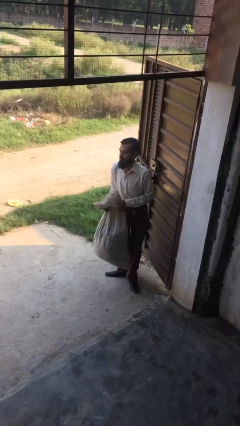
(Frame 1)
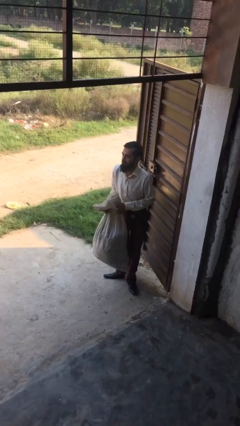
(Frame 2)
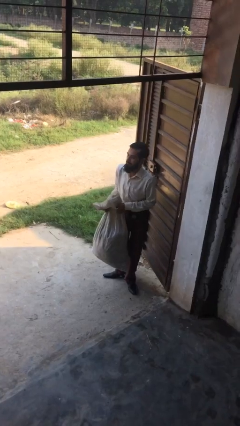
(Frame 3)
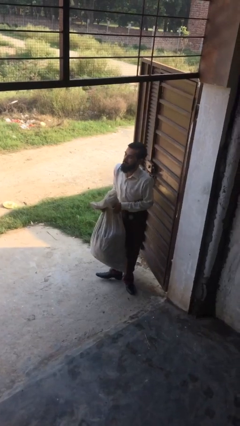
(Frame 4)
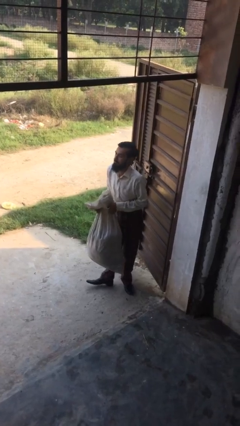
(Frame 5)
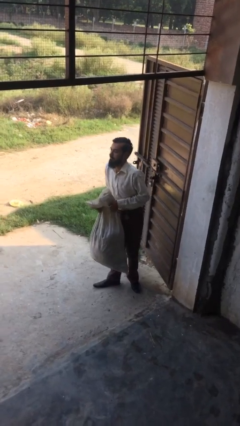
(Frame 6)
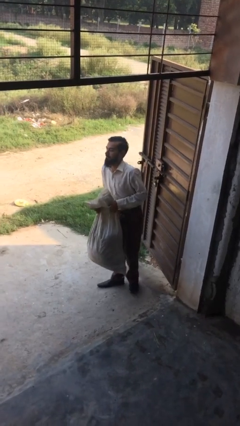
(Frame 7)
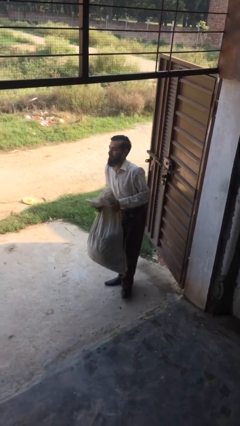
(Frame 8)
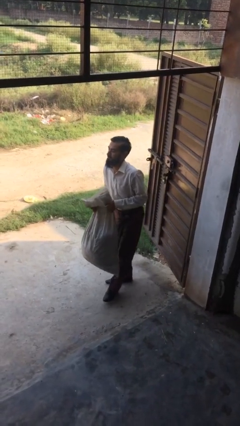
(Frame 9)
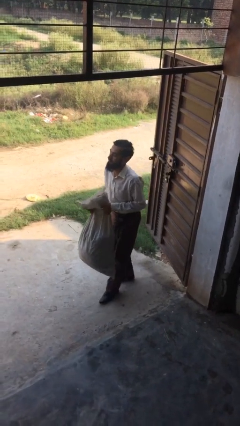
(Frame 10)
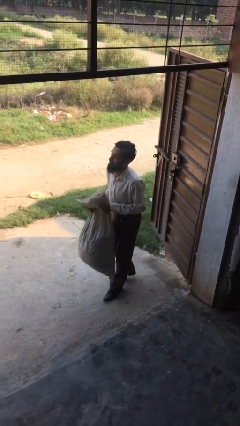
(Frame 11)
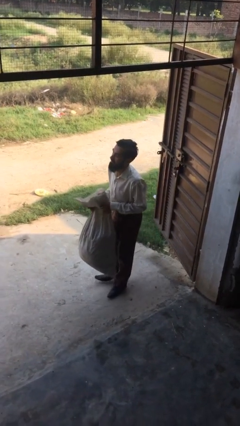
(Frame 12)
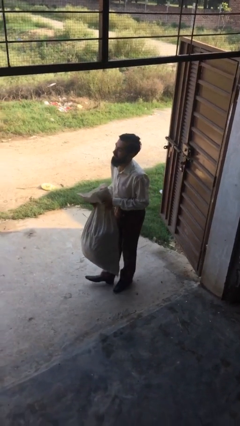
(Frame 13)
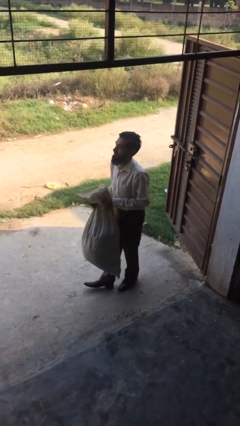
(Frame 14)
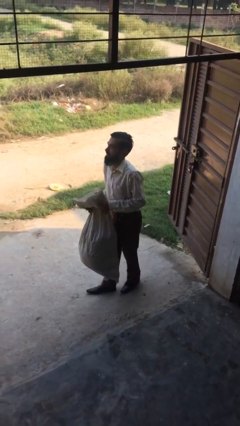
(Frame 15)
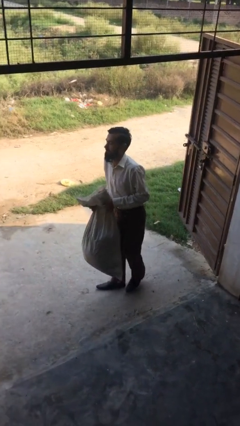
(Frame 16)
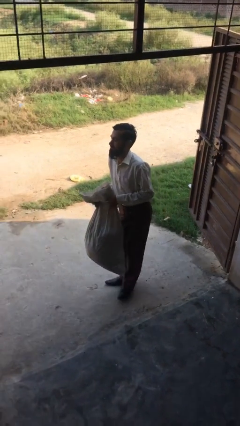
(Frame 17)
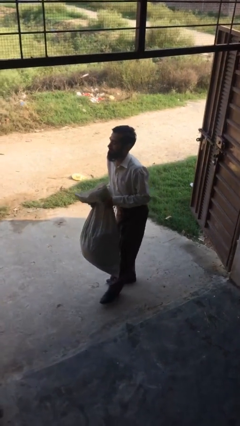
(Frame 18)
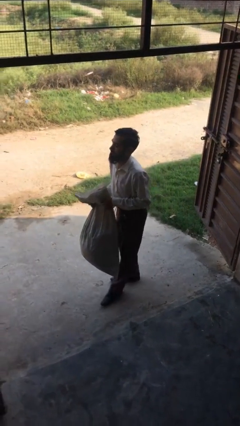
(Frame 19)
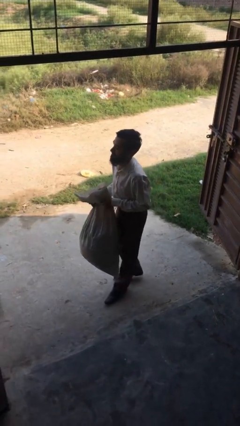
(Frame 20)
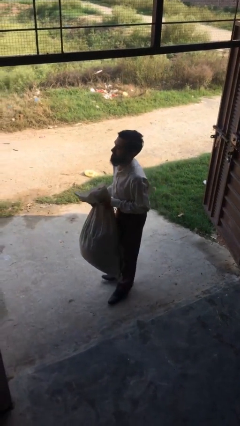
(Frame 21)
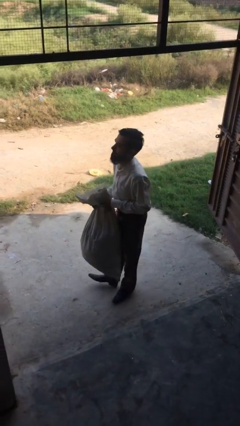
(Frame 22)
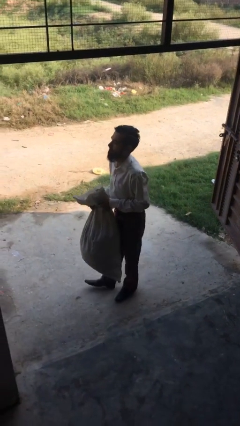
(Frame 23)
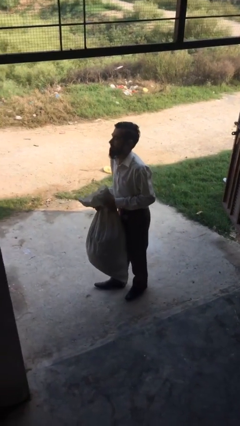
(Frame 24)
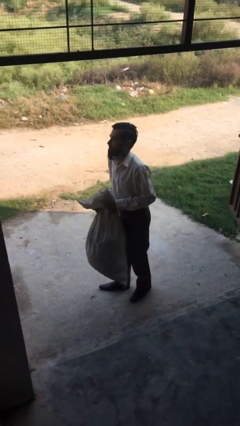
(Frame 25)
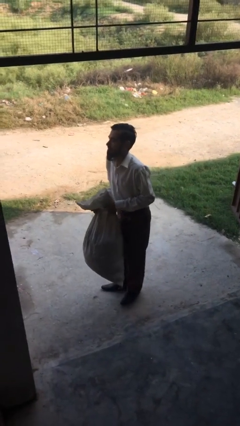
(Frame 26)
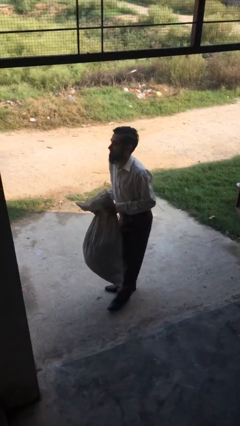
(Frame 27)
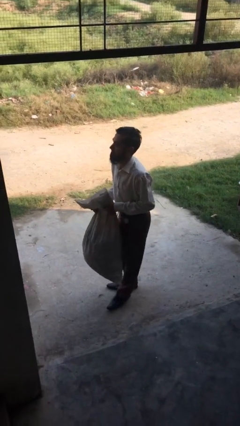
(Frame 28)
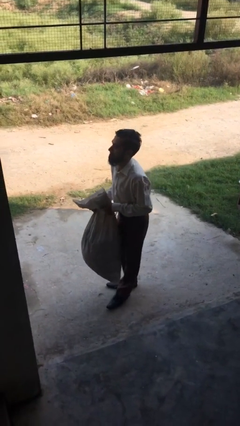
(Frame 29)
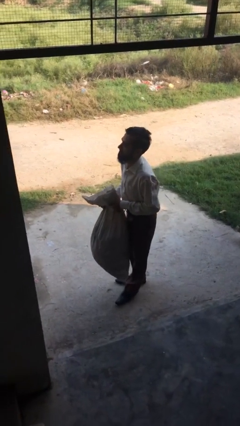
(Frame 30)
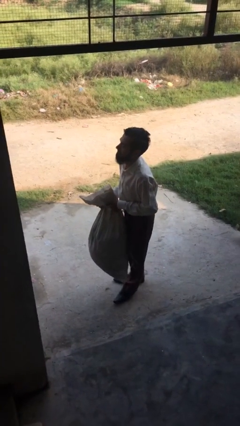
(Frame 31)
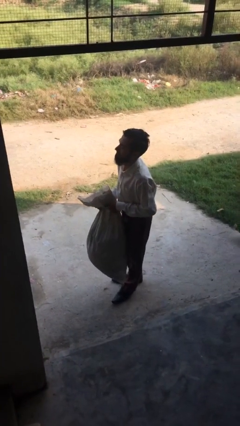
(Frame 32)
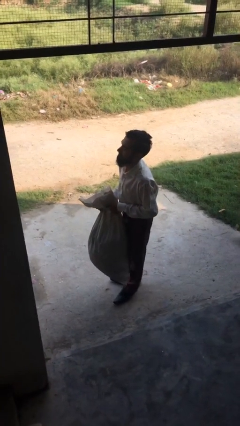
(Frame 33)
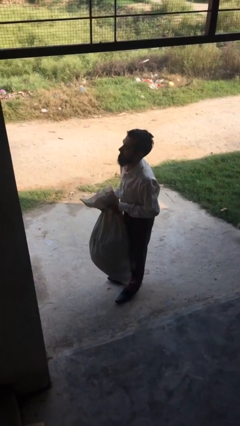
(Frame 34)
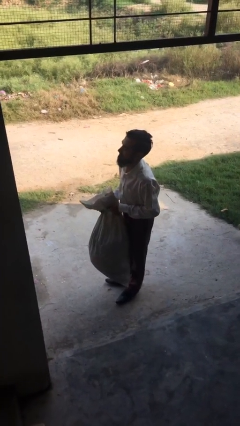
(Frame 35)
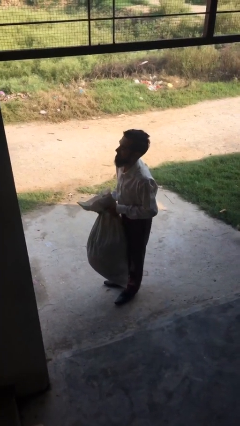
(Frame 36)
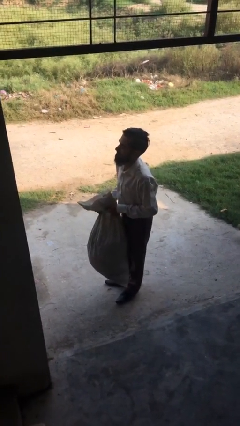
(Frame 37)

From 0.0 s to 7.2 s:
person carries heavy object

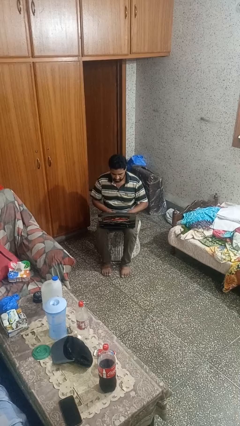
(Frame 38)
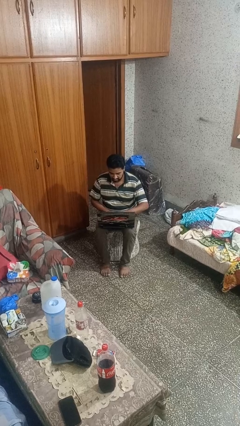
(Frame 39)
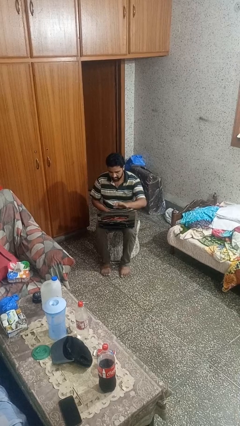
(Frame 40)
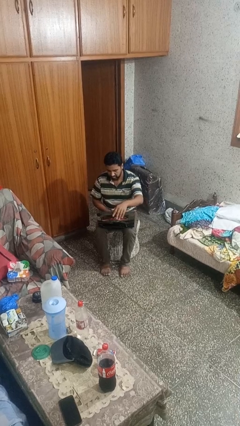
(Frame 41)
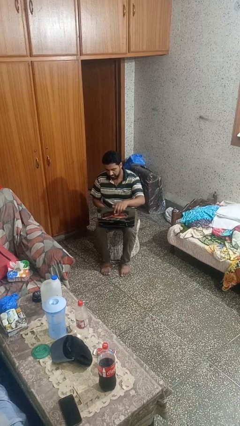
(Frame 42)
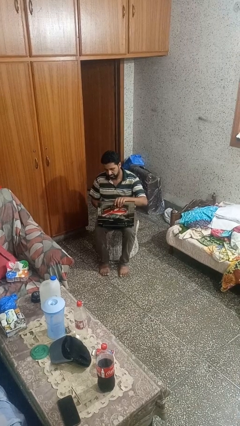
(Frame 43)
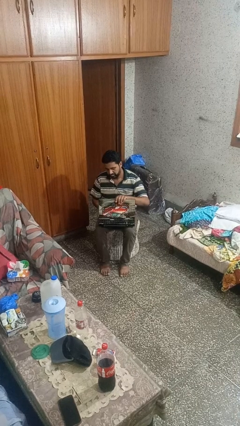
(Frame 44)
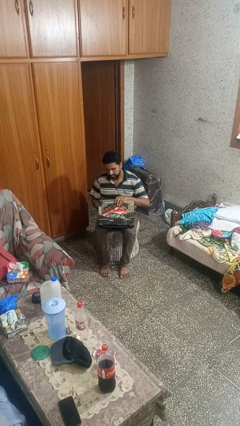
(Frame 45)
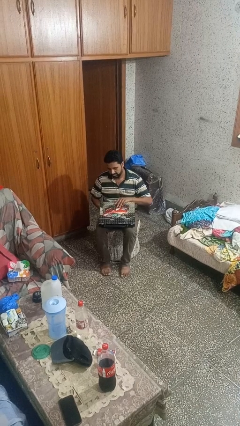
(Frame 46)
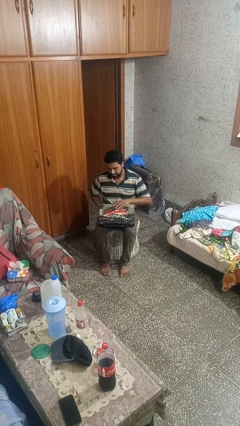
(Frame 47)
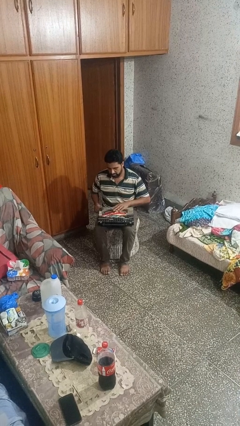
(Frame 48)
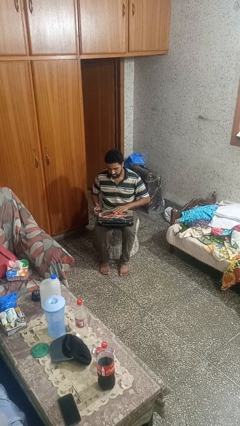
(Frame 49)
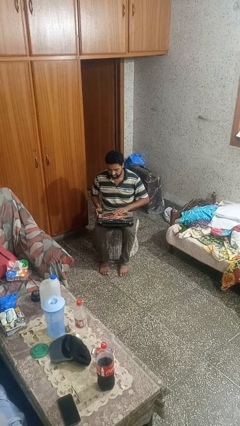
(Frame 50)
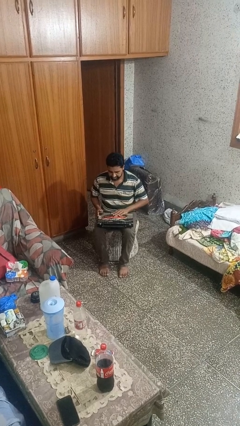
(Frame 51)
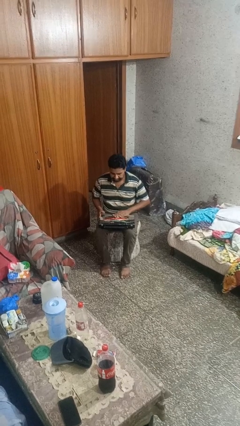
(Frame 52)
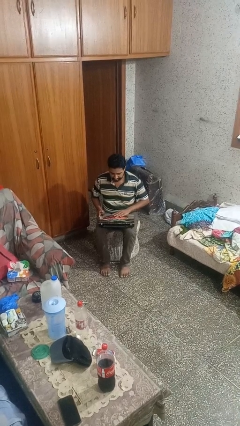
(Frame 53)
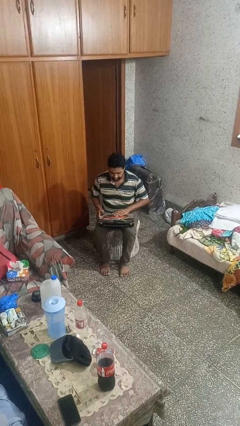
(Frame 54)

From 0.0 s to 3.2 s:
person closes laptop

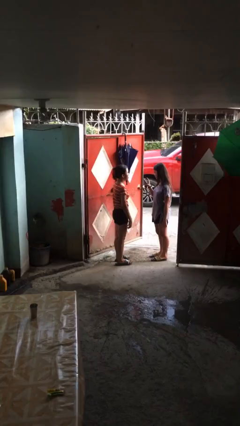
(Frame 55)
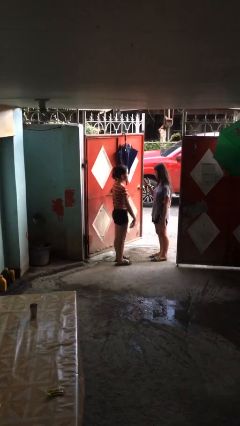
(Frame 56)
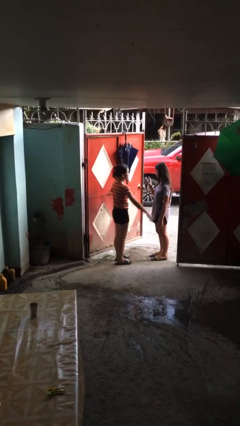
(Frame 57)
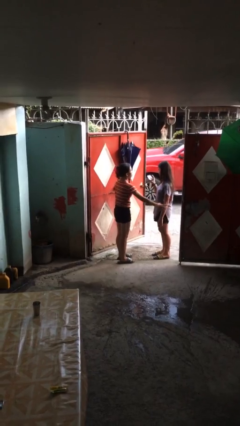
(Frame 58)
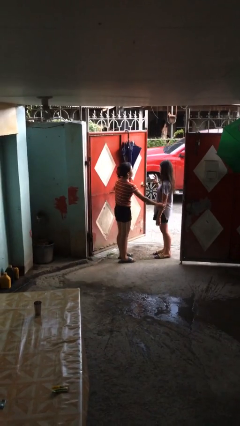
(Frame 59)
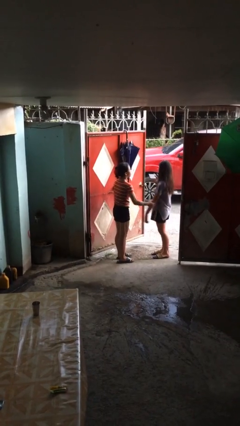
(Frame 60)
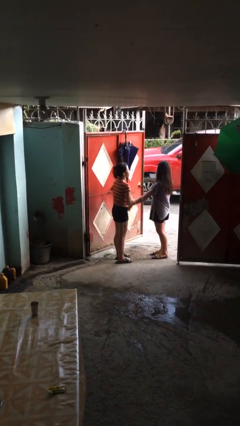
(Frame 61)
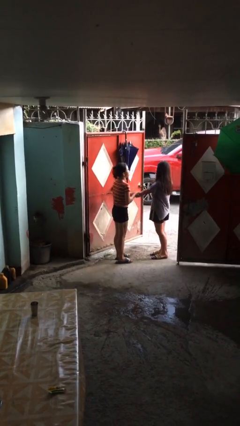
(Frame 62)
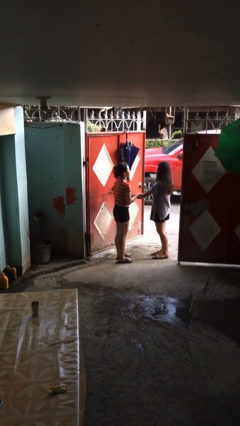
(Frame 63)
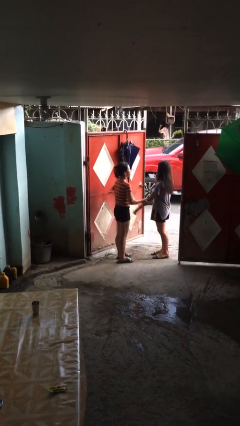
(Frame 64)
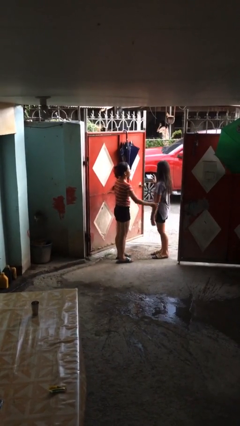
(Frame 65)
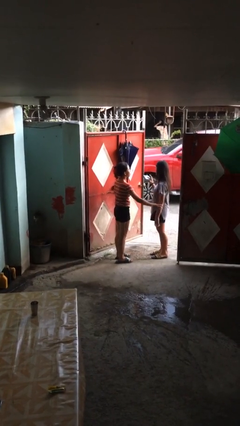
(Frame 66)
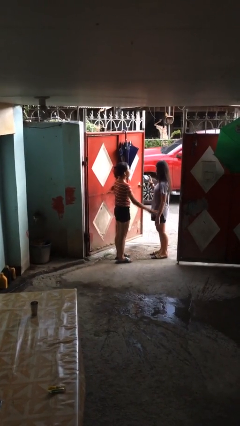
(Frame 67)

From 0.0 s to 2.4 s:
person grabs person by forearm

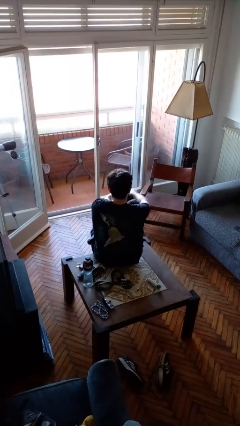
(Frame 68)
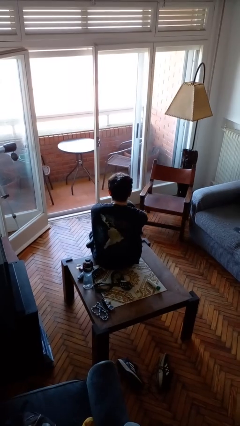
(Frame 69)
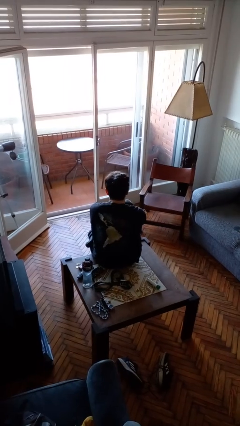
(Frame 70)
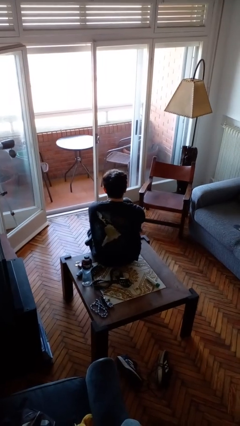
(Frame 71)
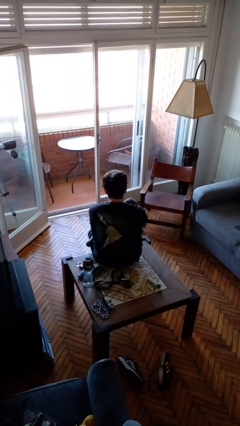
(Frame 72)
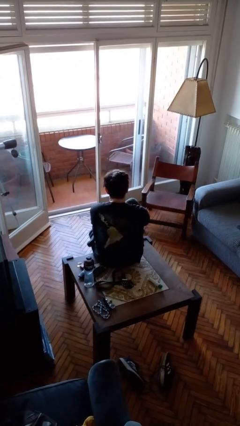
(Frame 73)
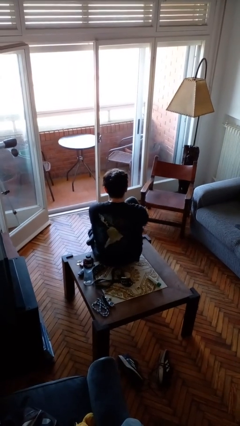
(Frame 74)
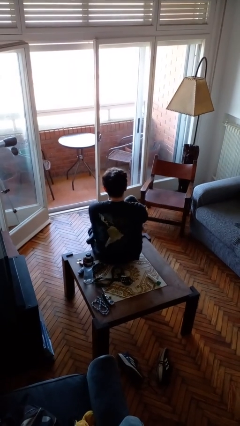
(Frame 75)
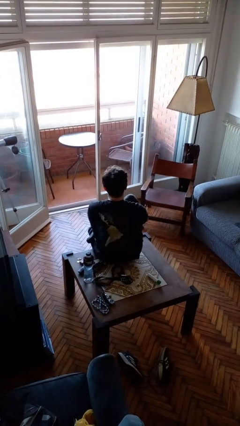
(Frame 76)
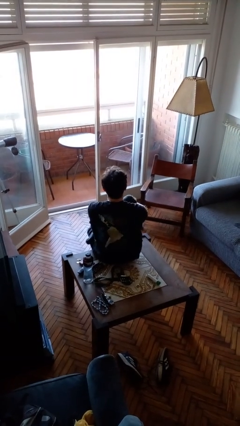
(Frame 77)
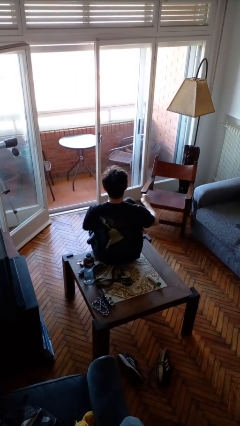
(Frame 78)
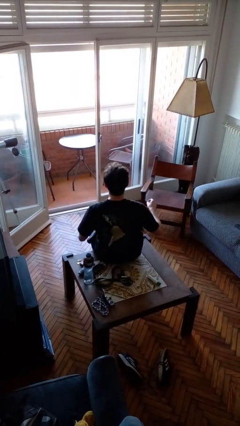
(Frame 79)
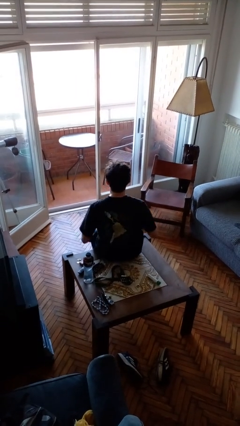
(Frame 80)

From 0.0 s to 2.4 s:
person puts on socks

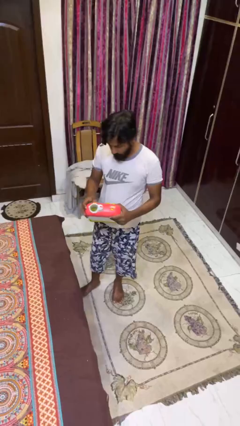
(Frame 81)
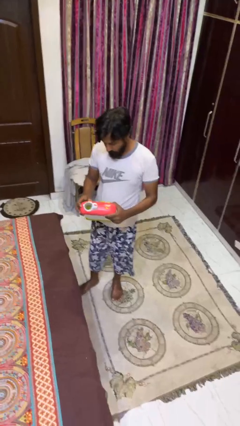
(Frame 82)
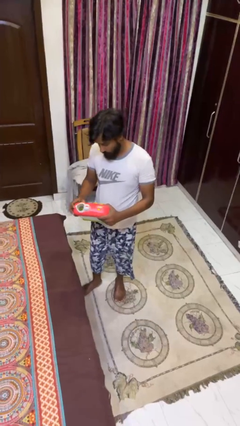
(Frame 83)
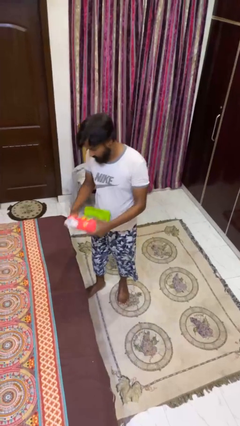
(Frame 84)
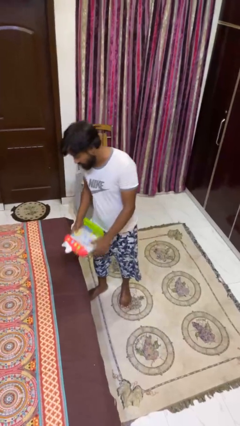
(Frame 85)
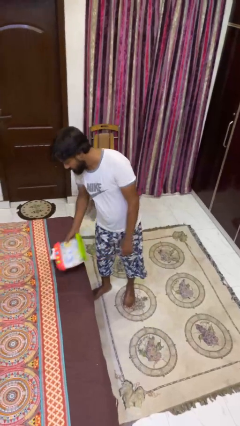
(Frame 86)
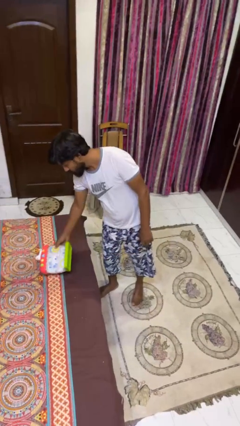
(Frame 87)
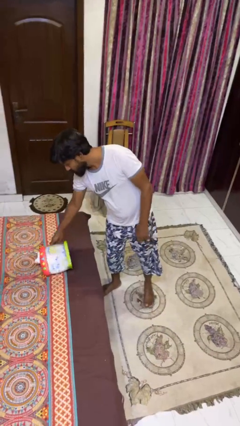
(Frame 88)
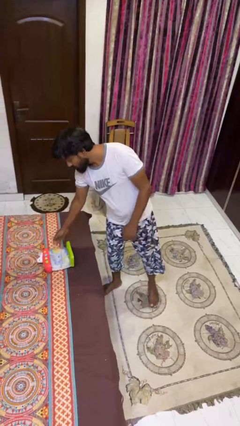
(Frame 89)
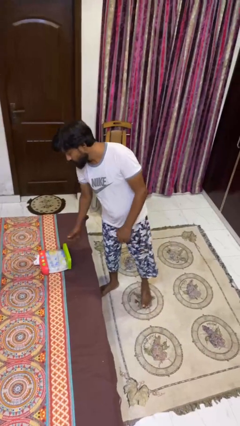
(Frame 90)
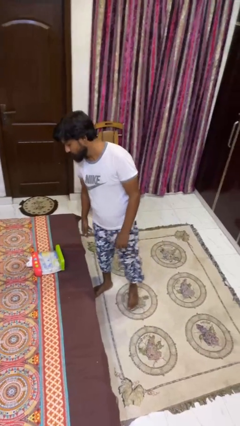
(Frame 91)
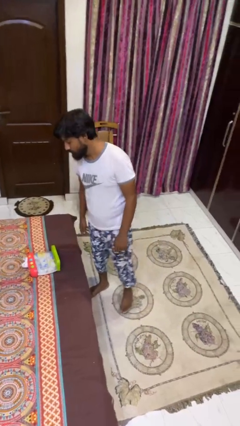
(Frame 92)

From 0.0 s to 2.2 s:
person puts down object on bed

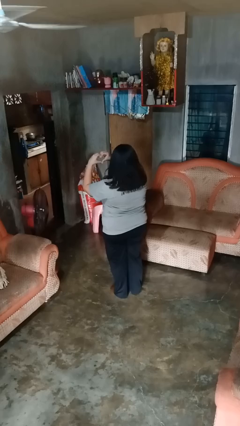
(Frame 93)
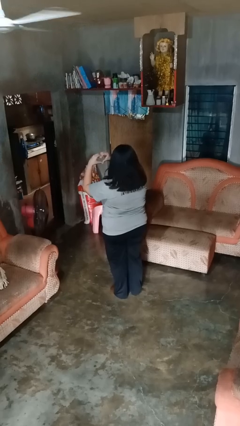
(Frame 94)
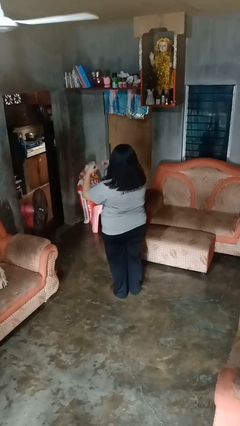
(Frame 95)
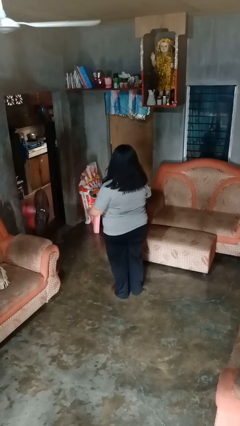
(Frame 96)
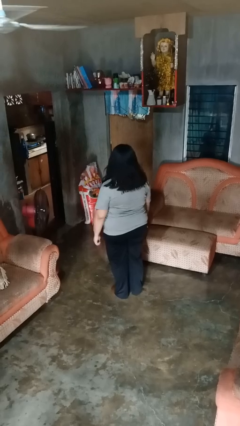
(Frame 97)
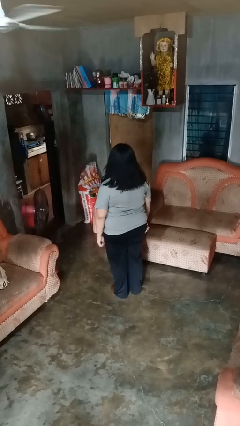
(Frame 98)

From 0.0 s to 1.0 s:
person gestures heart
